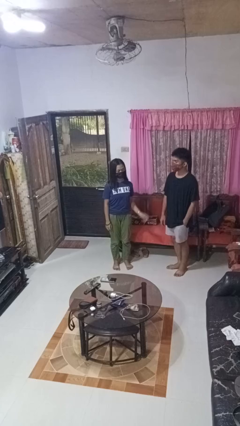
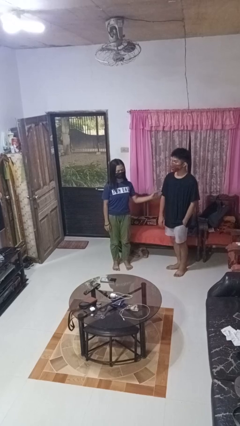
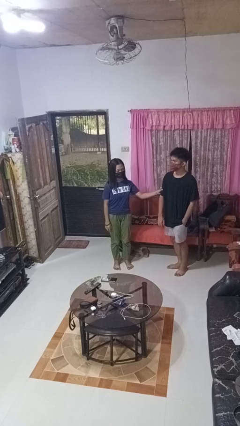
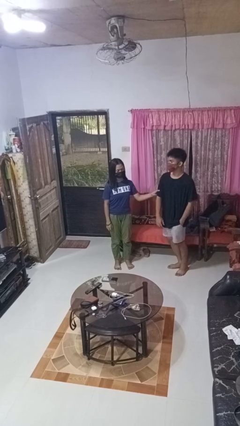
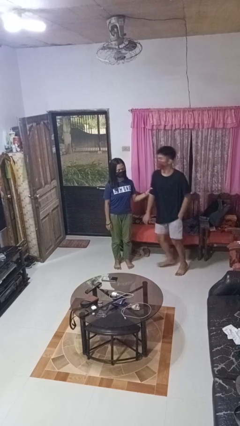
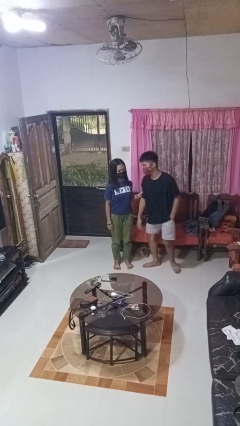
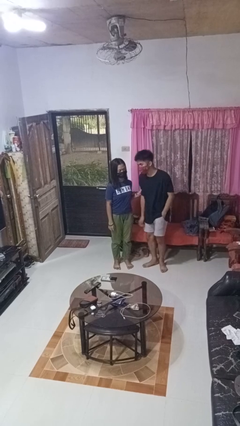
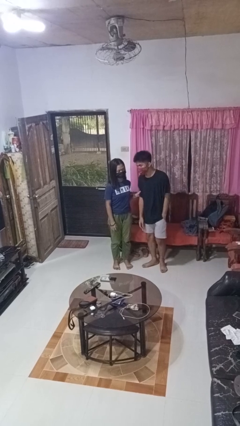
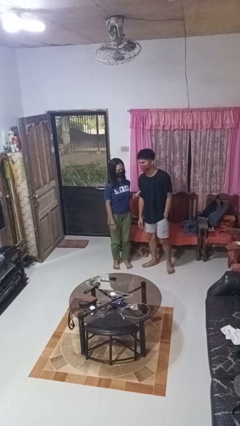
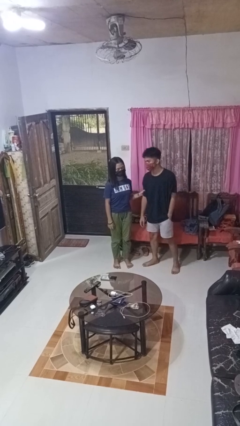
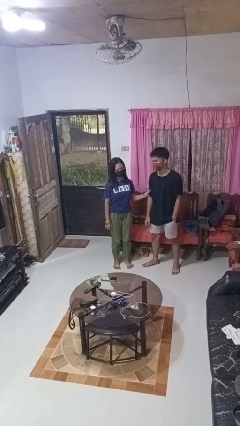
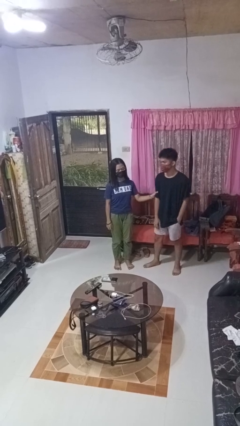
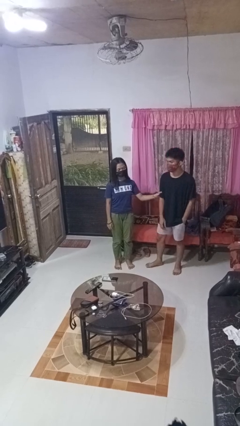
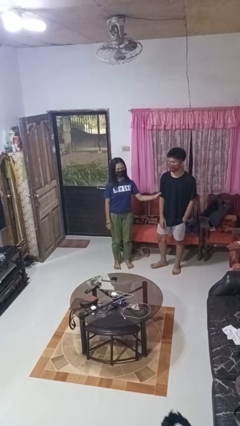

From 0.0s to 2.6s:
person grabs person by bicep

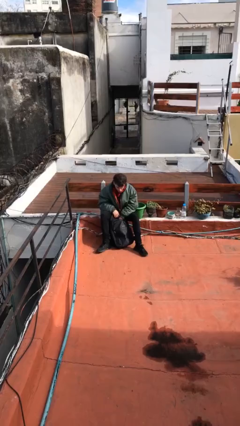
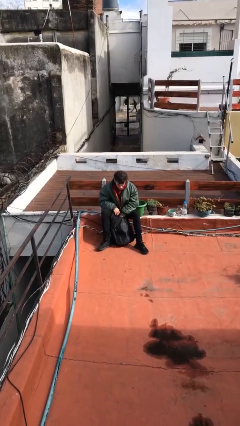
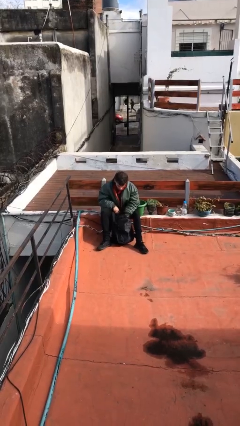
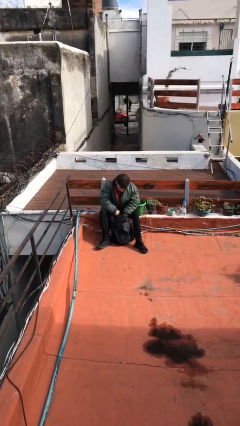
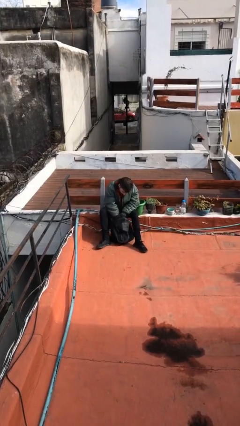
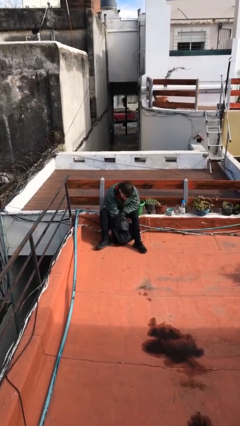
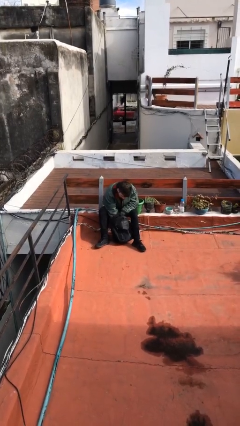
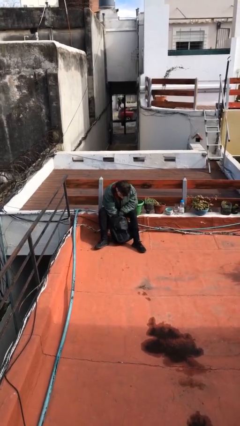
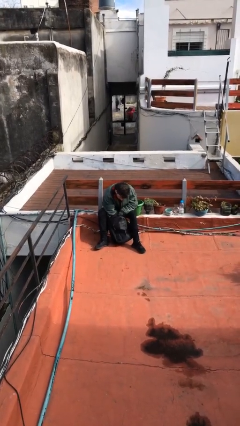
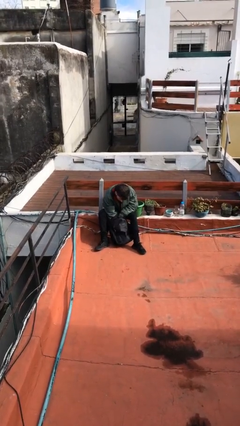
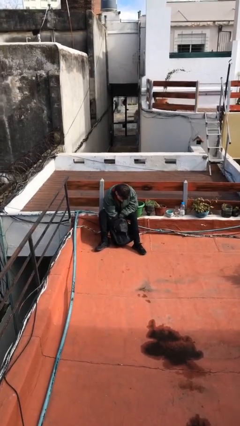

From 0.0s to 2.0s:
person searches in backpack

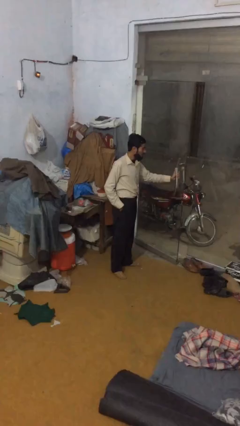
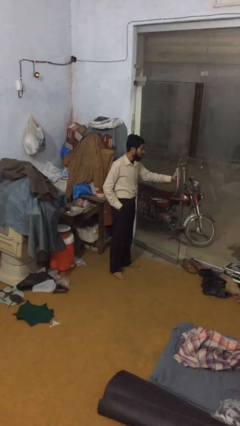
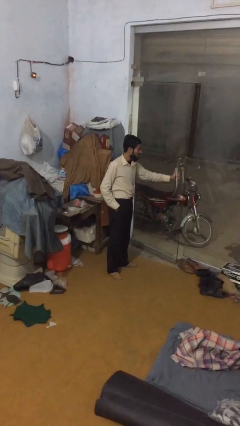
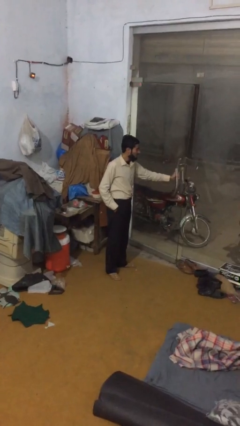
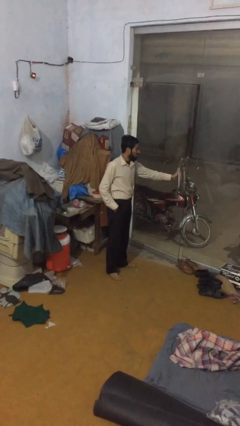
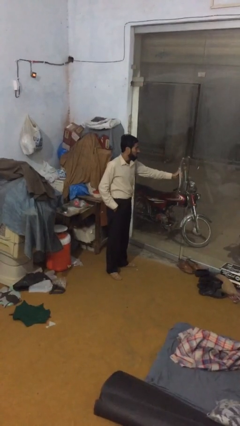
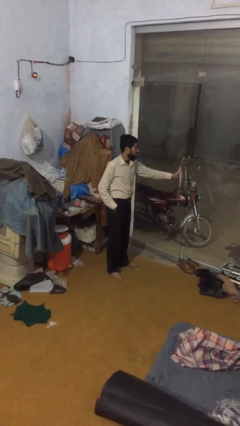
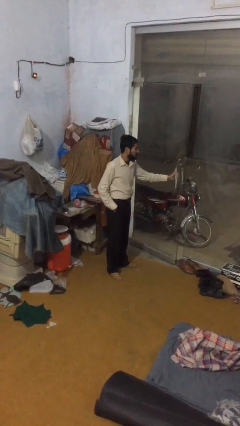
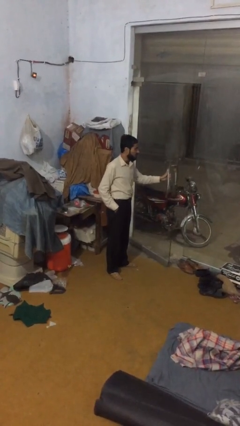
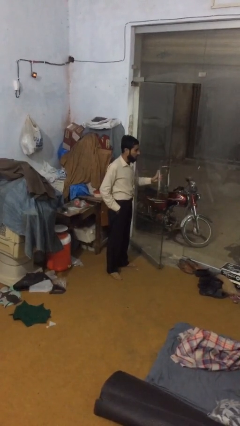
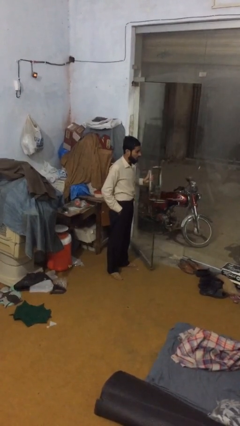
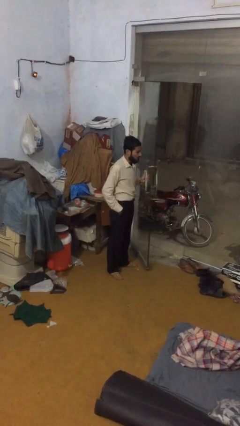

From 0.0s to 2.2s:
person opens facility door

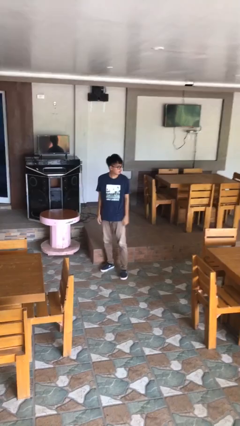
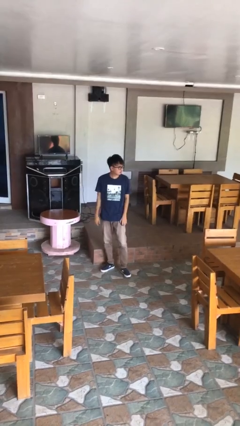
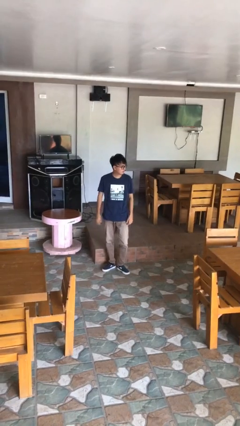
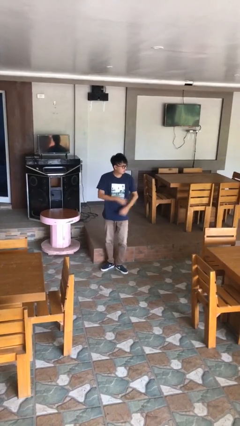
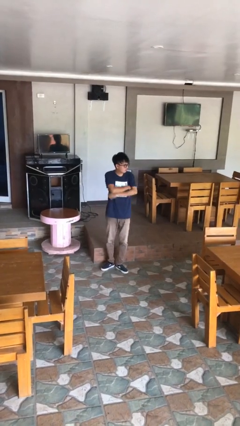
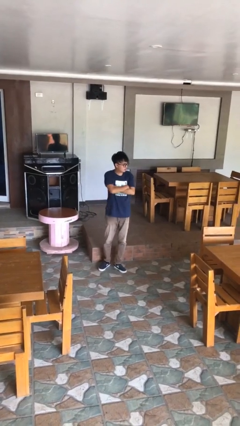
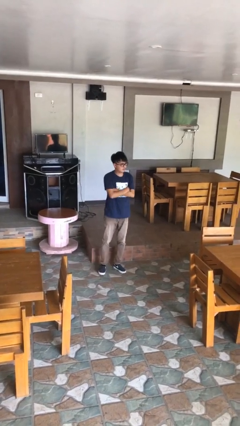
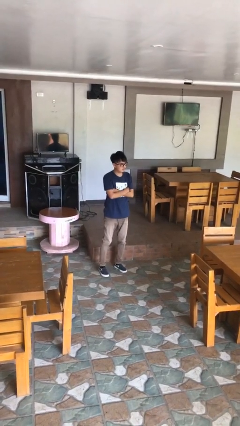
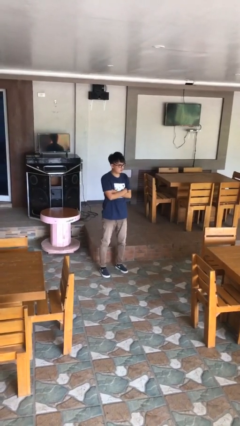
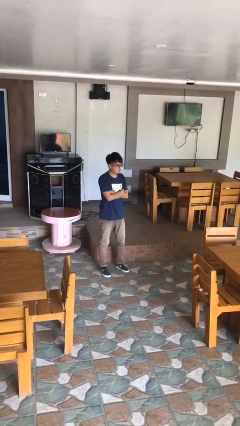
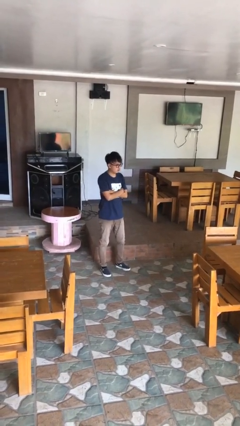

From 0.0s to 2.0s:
person crosses arms

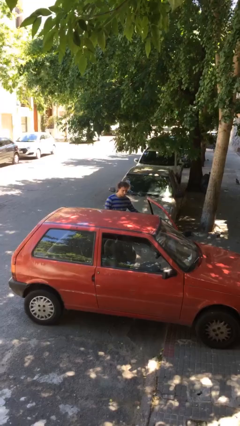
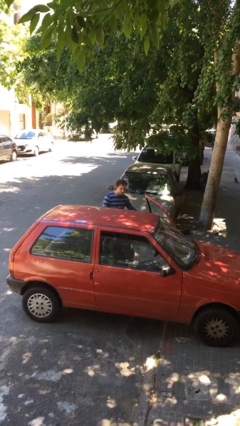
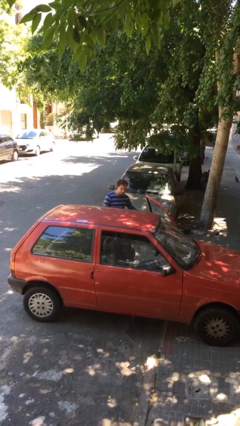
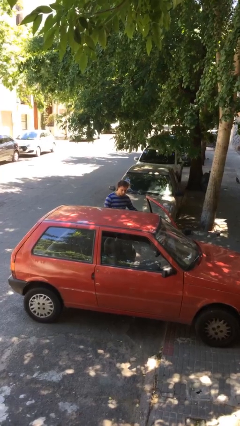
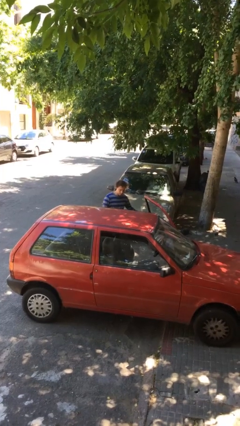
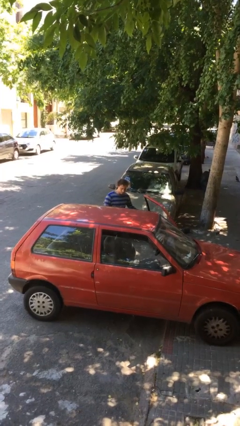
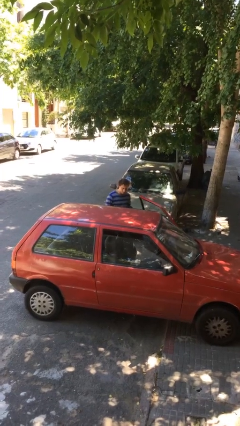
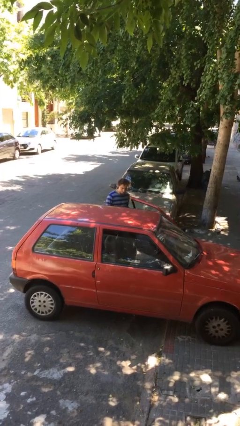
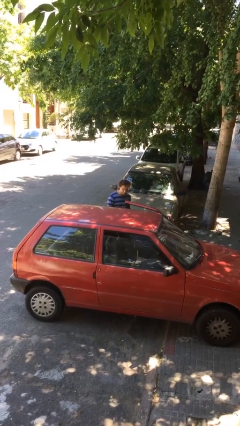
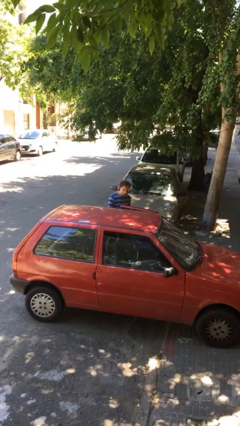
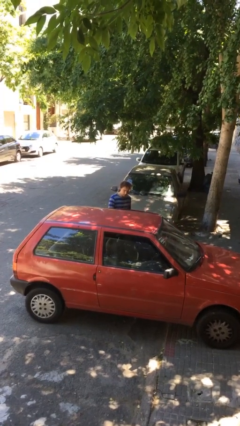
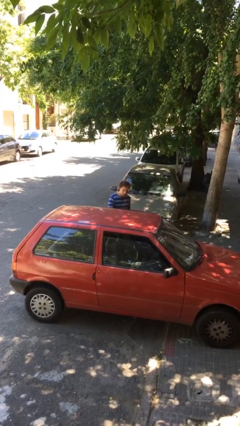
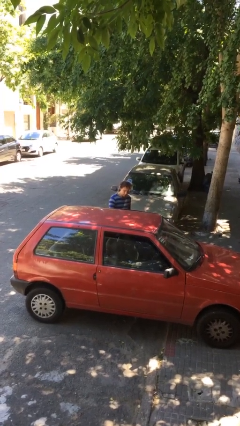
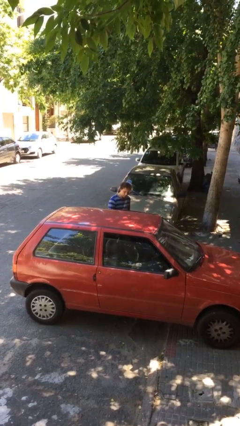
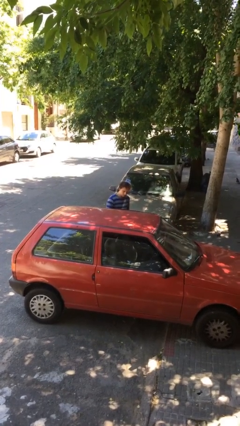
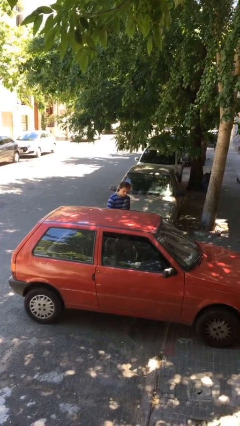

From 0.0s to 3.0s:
person closes car door

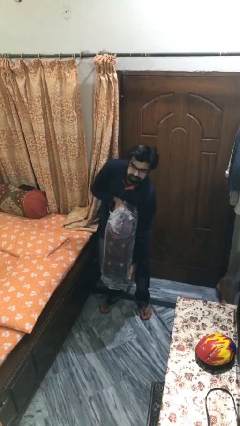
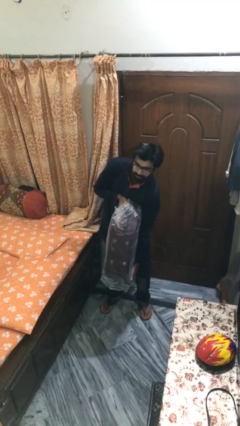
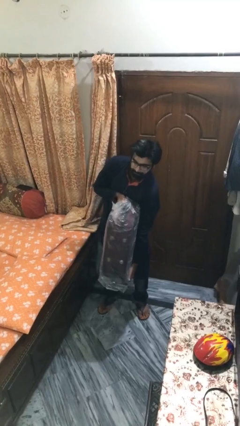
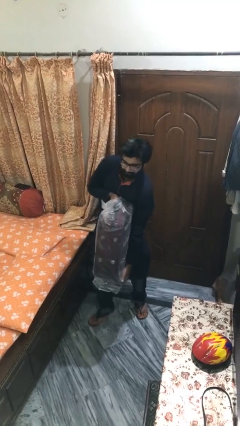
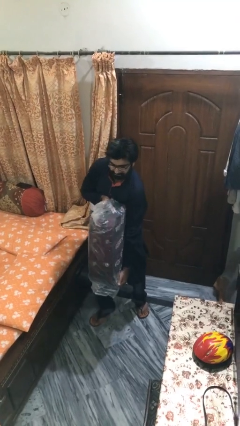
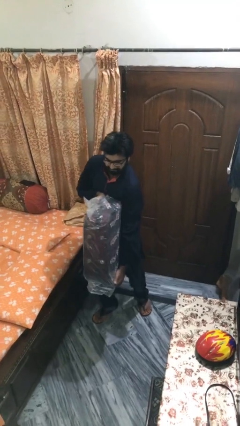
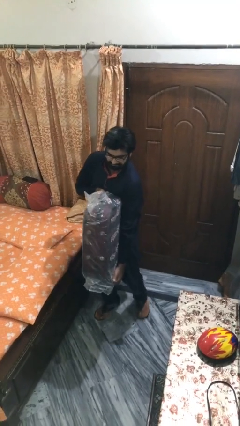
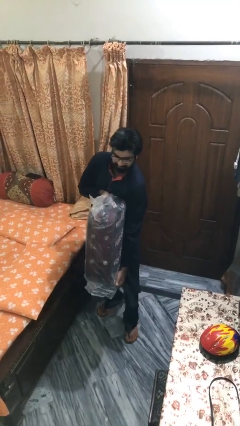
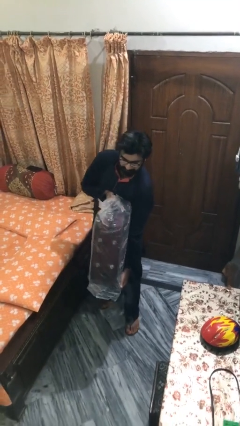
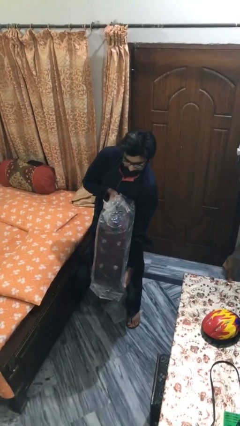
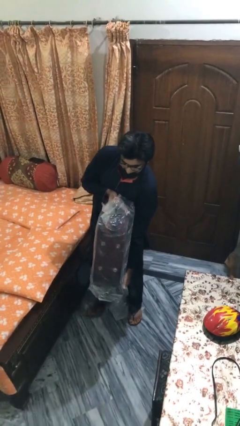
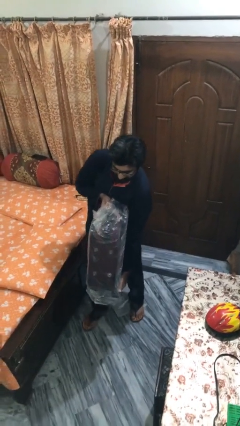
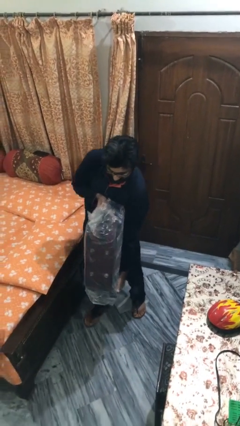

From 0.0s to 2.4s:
person carries heavy object

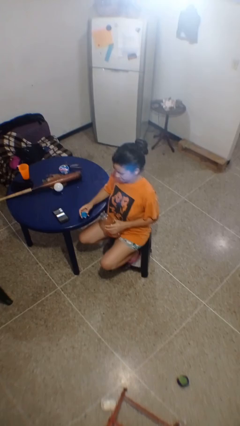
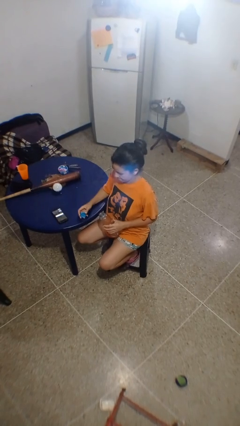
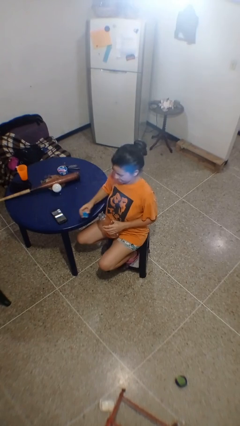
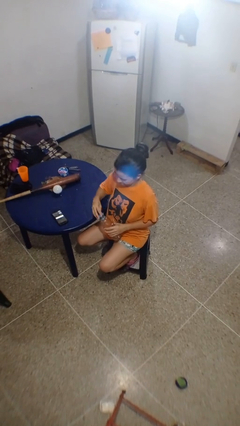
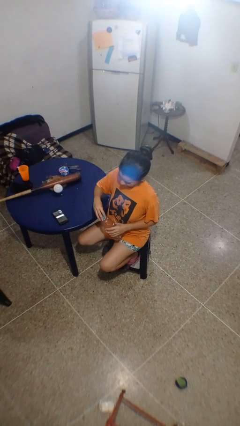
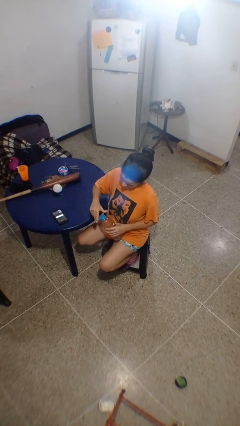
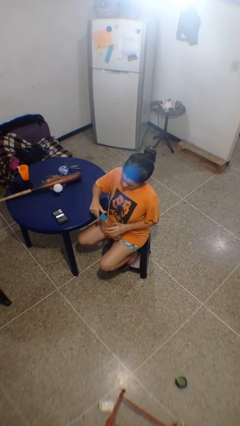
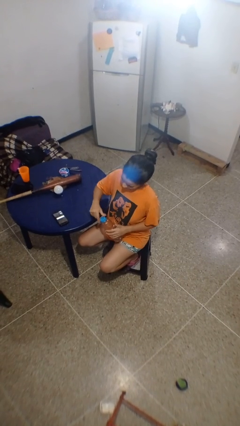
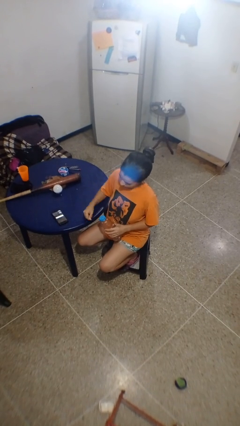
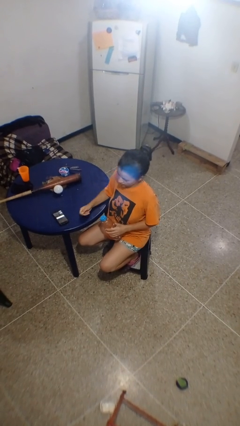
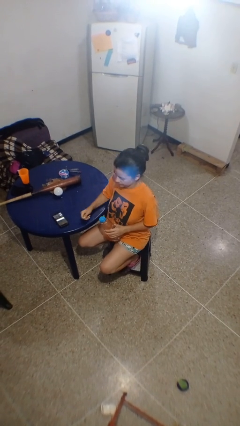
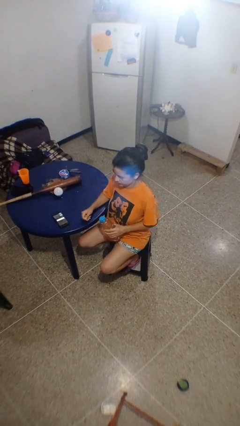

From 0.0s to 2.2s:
person screws lid to bottle
